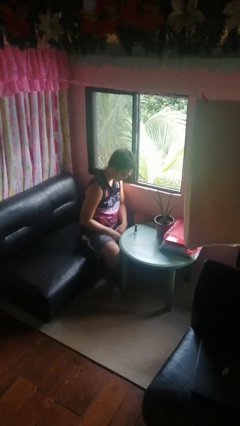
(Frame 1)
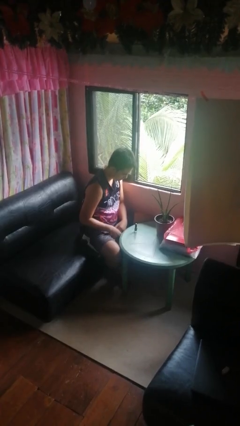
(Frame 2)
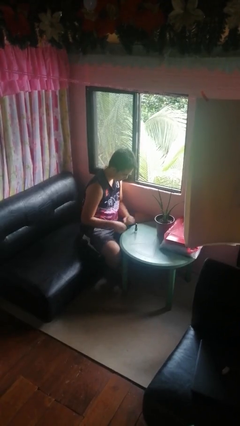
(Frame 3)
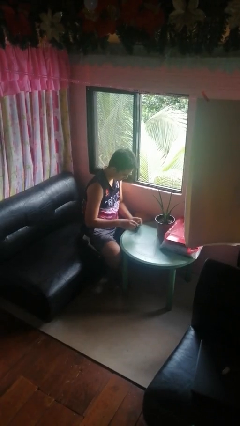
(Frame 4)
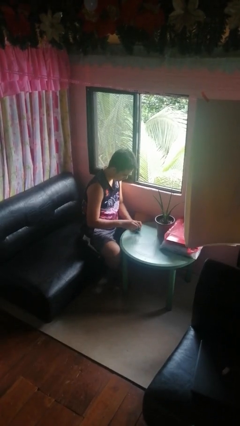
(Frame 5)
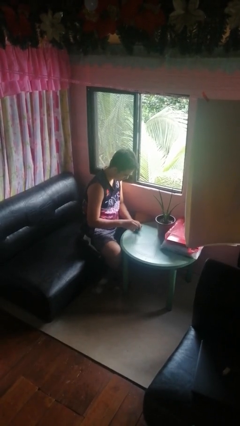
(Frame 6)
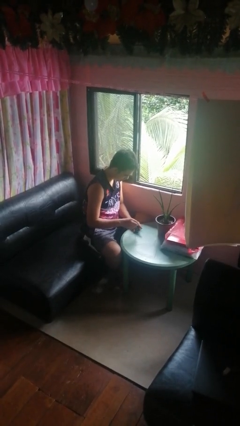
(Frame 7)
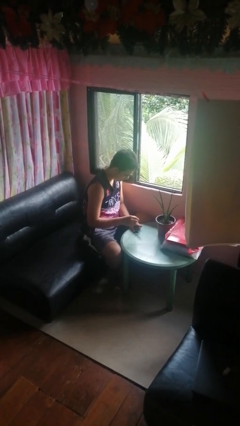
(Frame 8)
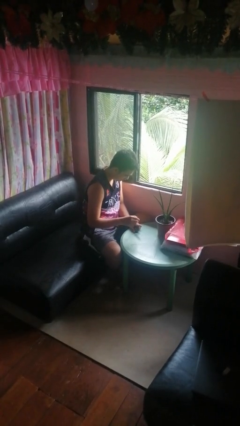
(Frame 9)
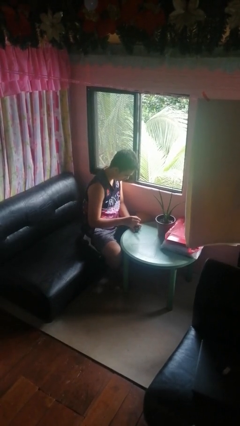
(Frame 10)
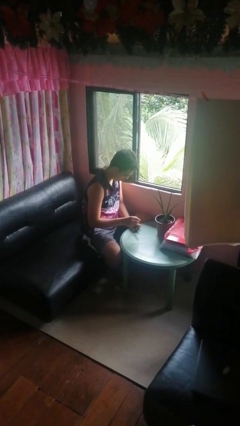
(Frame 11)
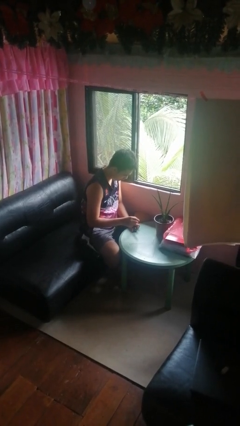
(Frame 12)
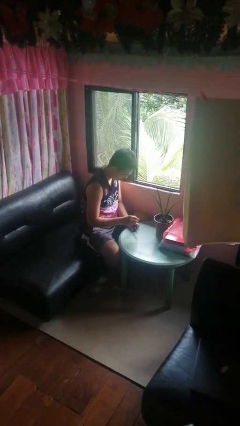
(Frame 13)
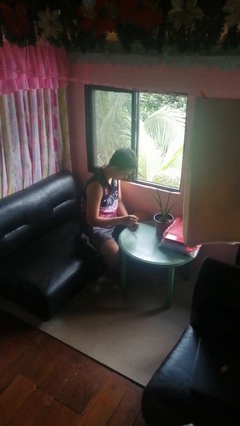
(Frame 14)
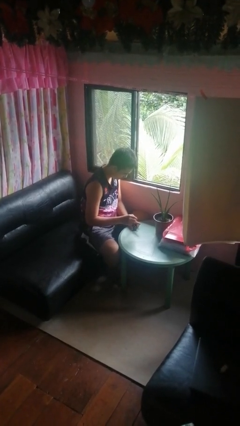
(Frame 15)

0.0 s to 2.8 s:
person paints fingernails

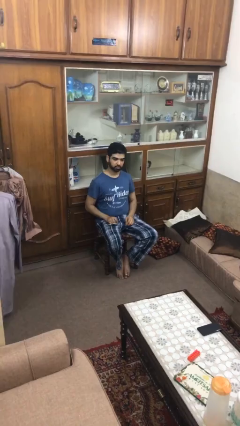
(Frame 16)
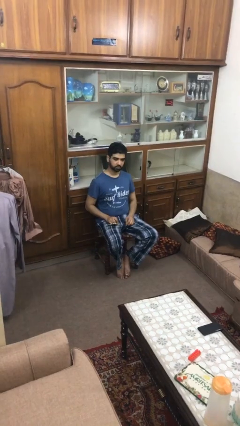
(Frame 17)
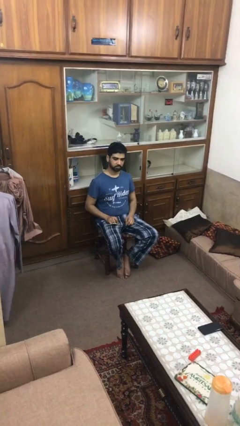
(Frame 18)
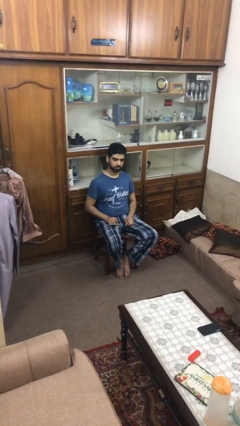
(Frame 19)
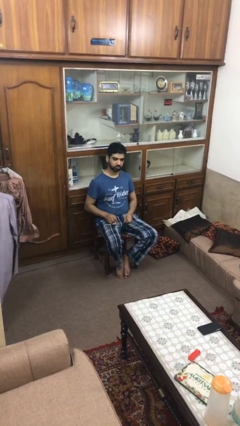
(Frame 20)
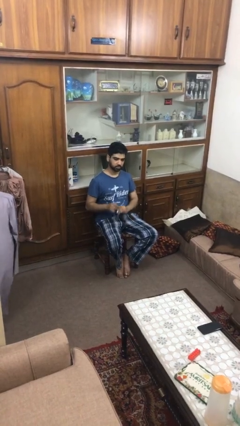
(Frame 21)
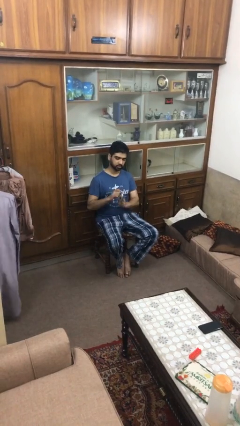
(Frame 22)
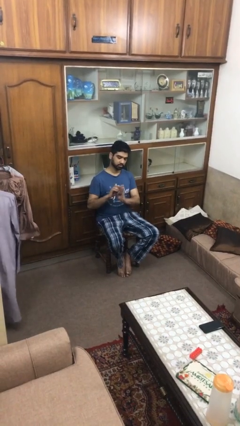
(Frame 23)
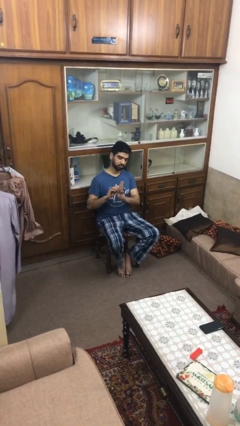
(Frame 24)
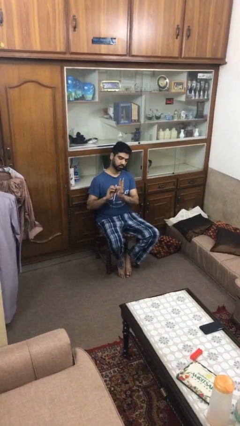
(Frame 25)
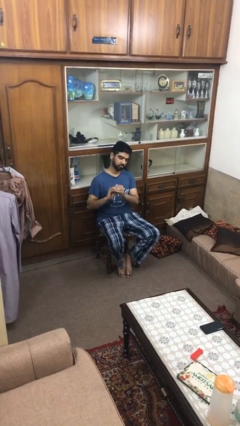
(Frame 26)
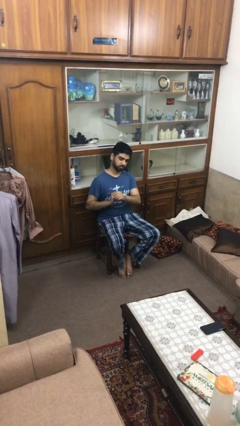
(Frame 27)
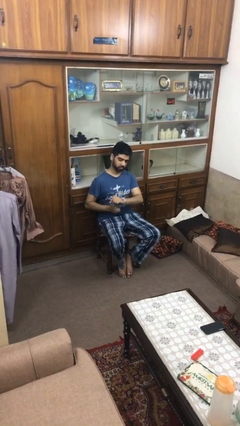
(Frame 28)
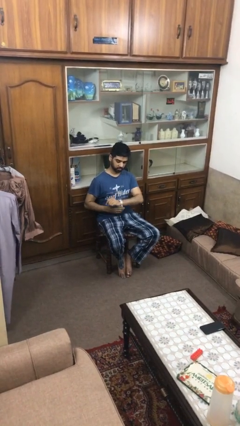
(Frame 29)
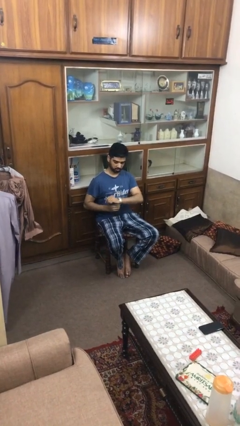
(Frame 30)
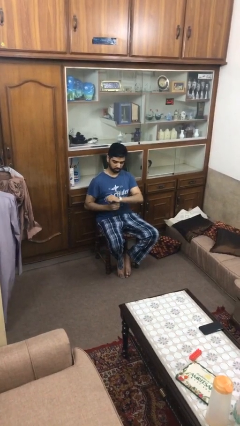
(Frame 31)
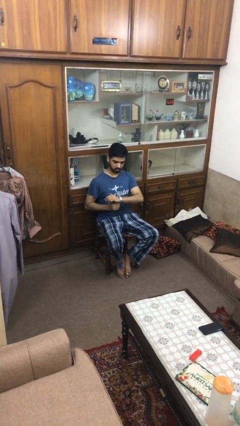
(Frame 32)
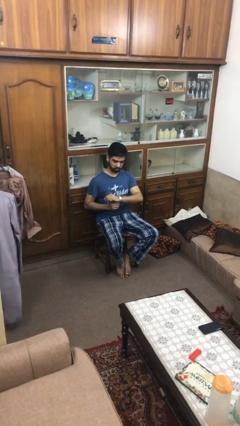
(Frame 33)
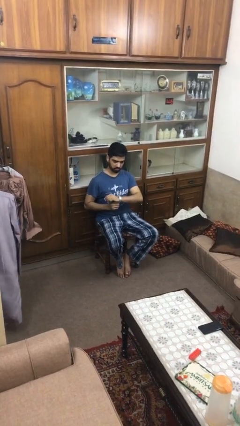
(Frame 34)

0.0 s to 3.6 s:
person puts on wristwatch

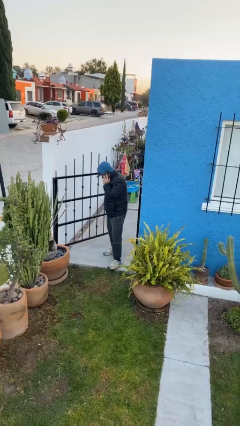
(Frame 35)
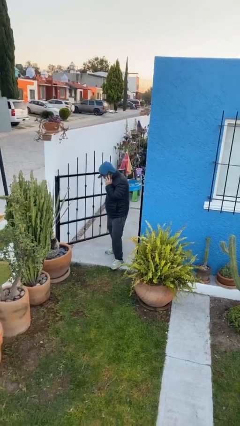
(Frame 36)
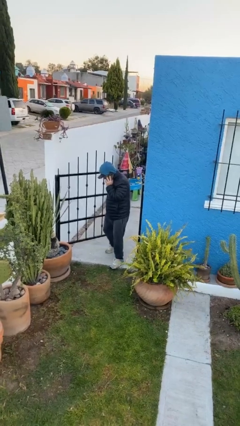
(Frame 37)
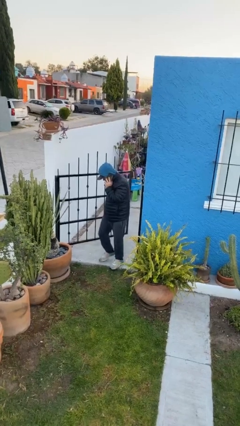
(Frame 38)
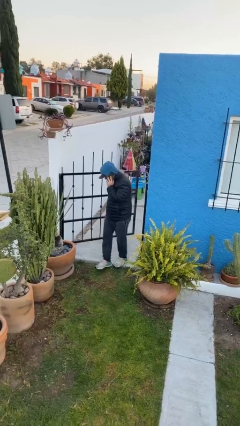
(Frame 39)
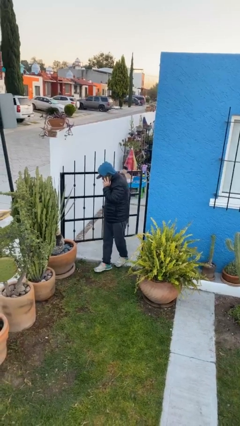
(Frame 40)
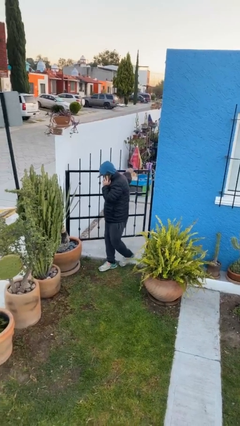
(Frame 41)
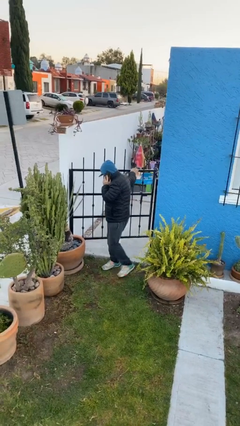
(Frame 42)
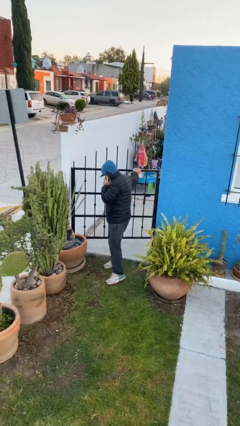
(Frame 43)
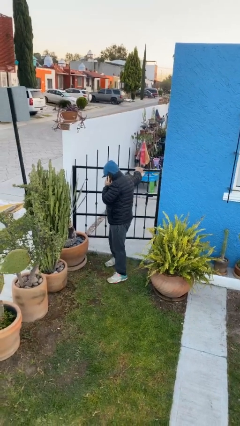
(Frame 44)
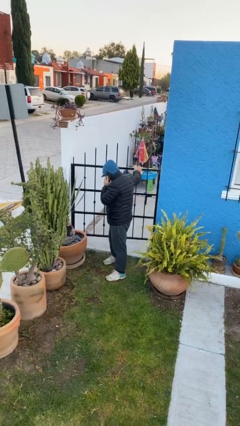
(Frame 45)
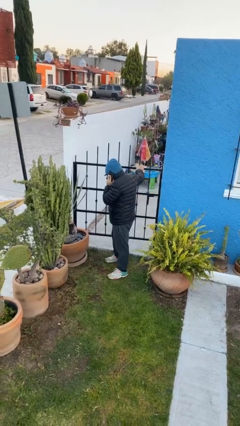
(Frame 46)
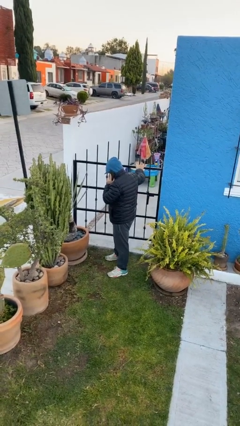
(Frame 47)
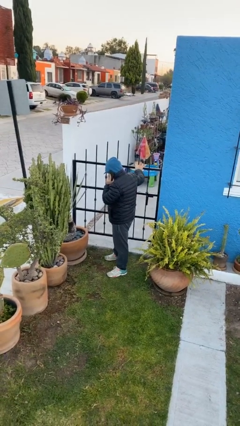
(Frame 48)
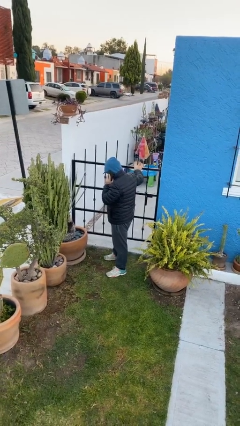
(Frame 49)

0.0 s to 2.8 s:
person closes facility door

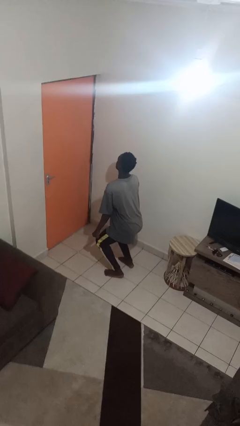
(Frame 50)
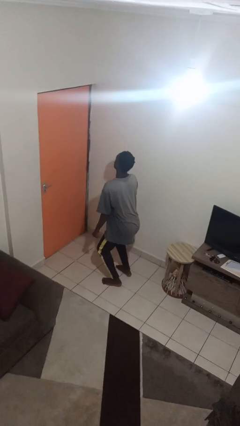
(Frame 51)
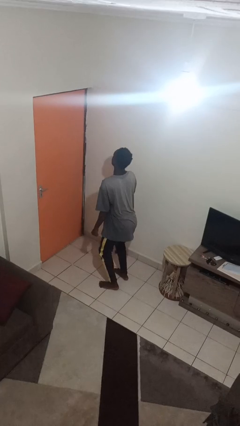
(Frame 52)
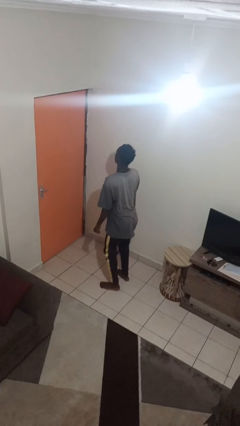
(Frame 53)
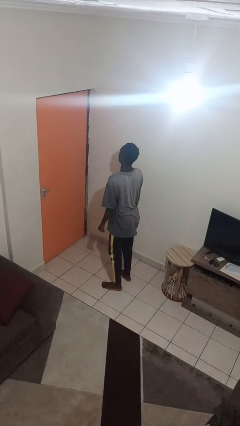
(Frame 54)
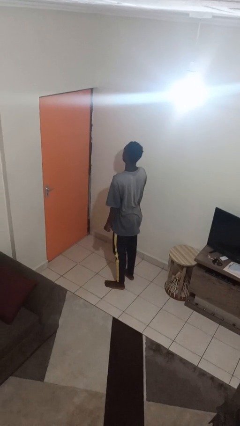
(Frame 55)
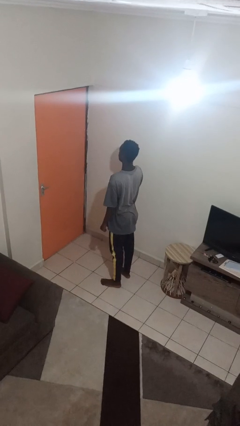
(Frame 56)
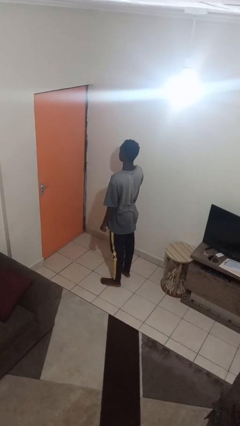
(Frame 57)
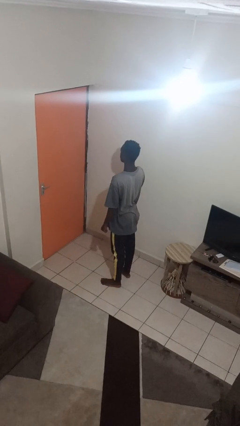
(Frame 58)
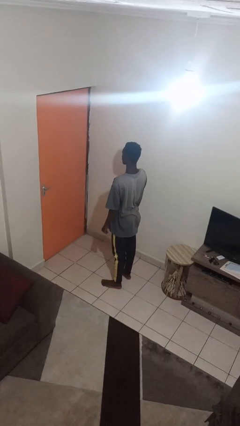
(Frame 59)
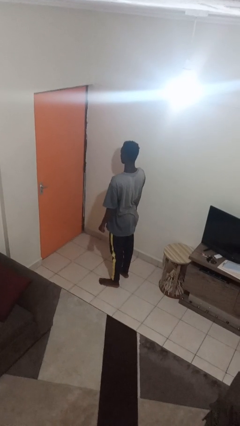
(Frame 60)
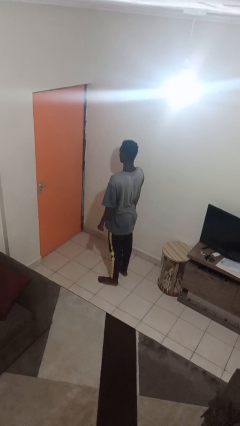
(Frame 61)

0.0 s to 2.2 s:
person stands up

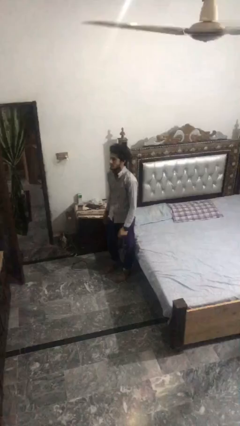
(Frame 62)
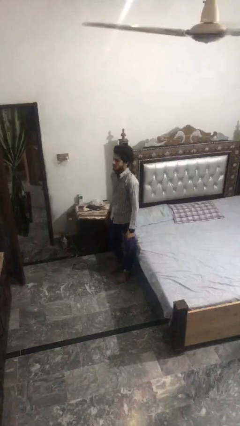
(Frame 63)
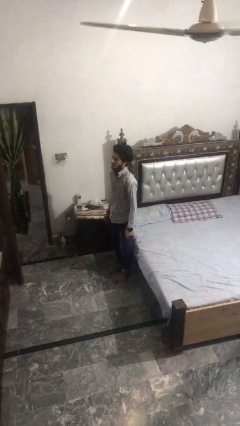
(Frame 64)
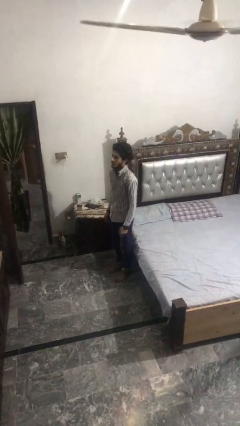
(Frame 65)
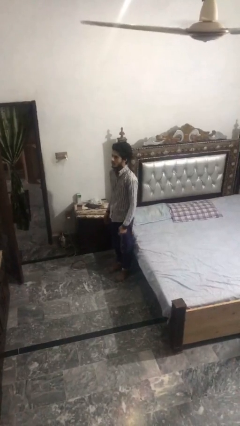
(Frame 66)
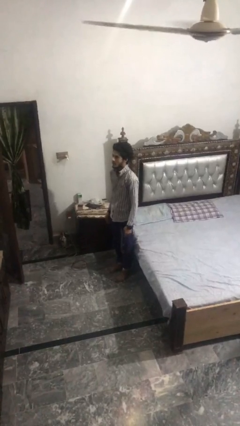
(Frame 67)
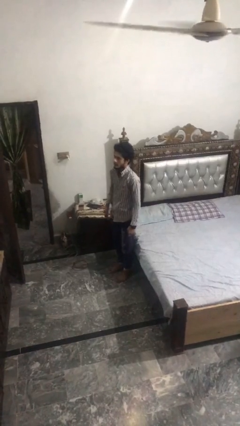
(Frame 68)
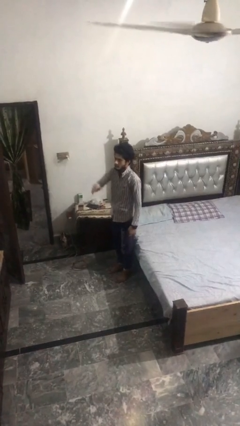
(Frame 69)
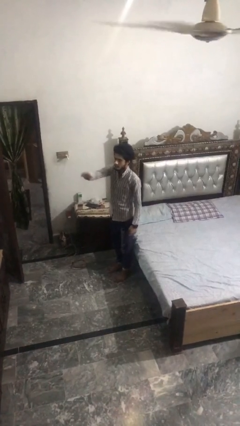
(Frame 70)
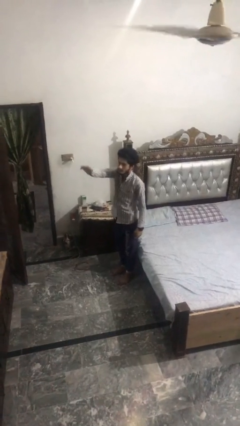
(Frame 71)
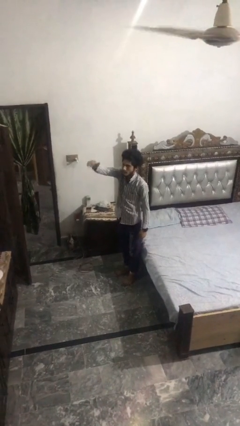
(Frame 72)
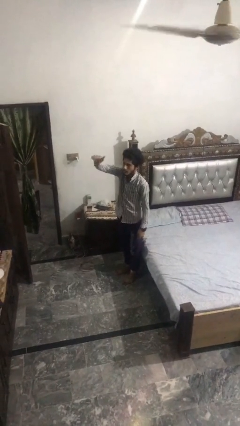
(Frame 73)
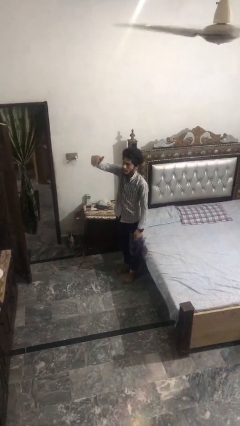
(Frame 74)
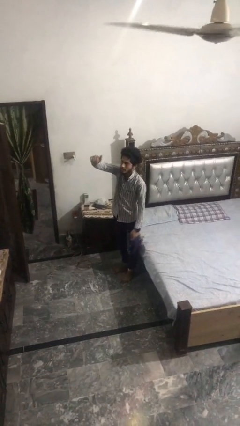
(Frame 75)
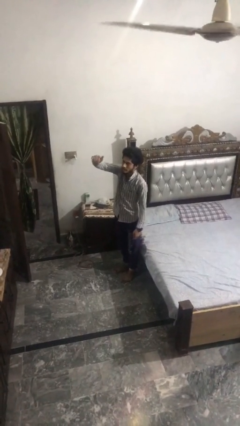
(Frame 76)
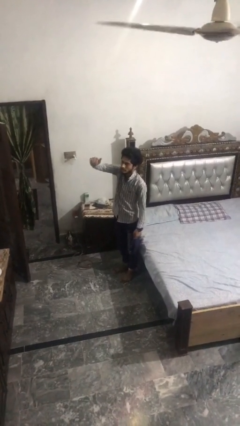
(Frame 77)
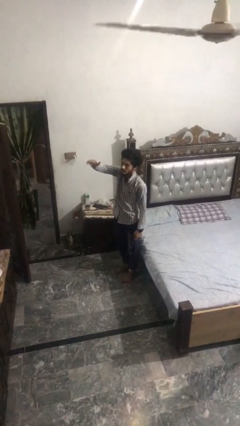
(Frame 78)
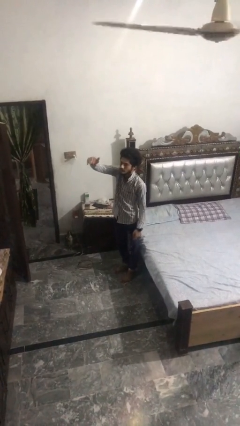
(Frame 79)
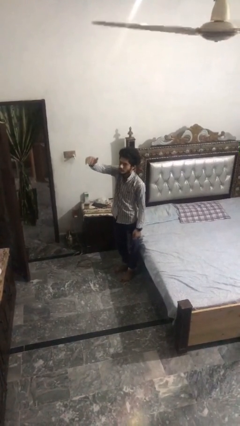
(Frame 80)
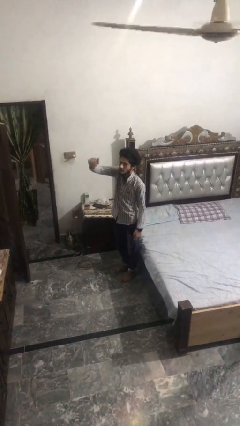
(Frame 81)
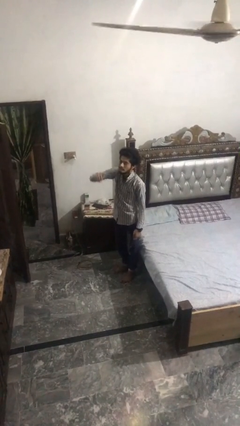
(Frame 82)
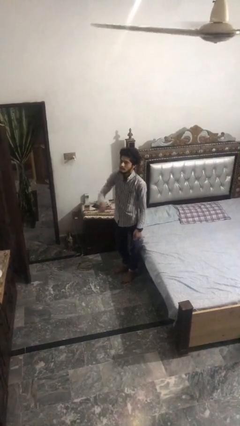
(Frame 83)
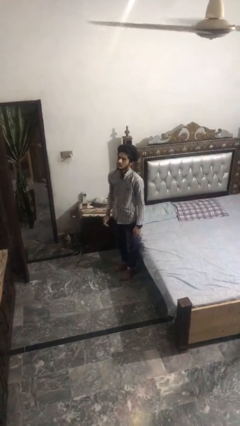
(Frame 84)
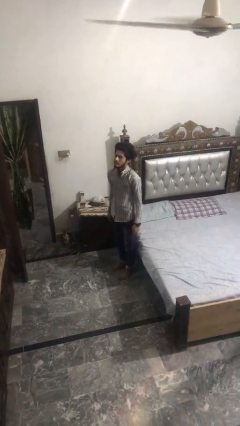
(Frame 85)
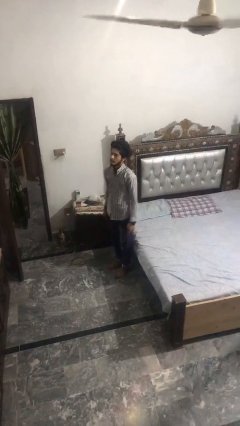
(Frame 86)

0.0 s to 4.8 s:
person gestures come here

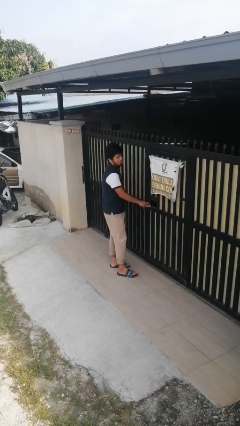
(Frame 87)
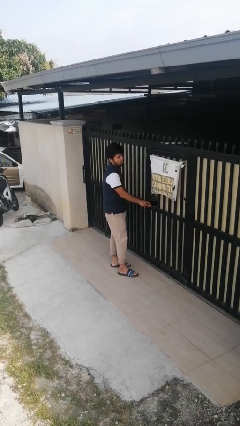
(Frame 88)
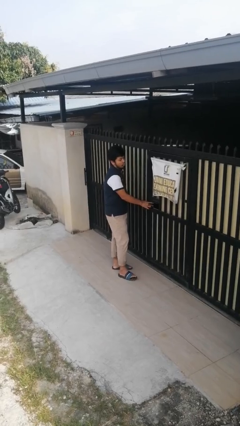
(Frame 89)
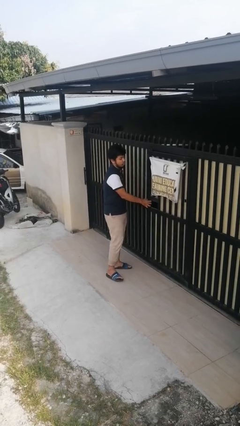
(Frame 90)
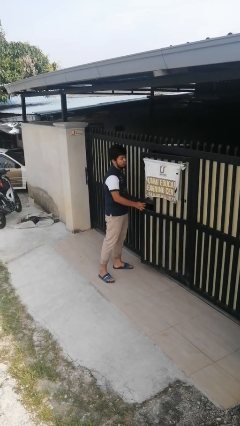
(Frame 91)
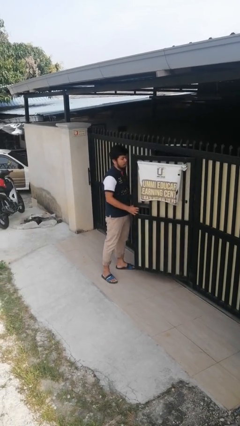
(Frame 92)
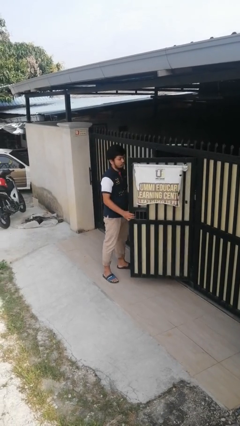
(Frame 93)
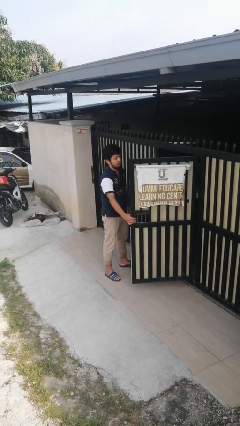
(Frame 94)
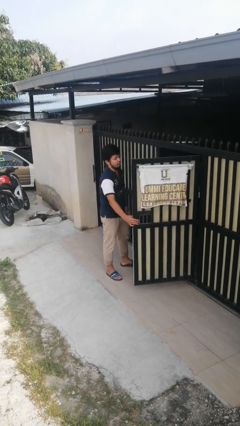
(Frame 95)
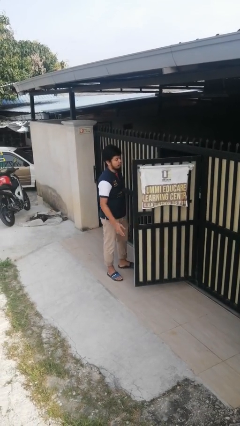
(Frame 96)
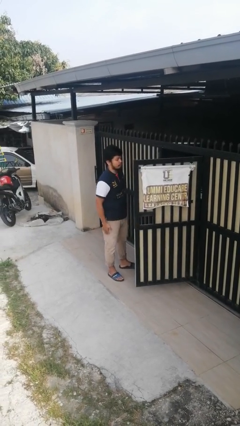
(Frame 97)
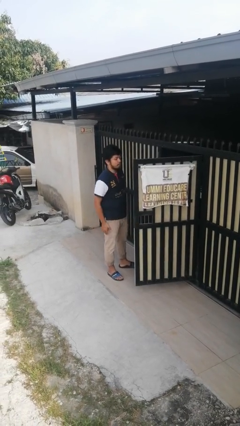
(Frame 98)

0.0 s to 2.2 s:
person opens gate
